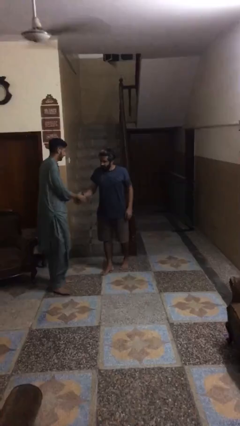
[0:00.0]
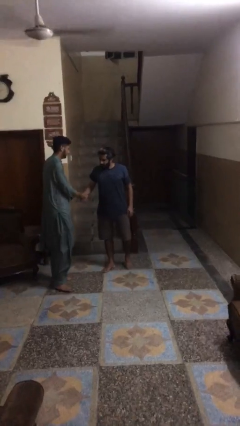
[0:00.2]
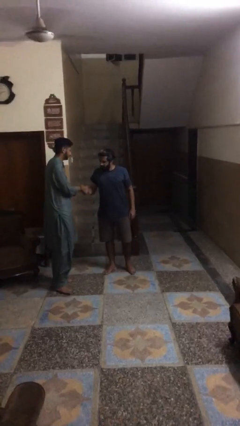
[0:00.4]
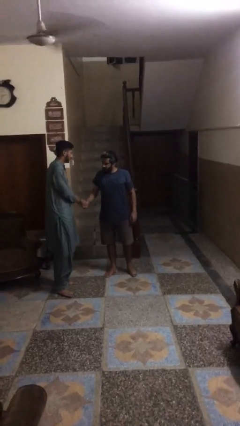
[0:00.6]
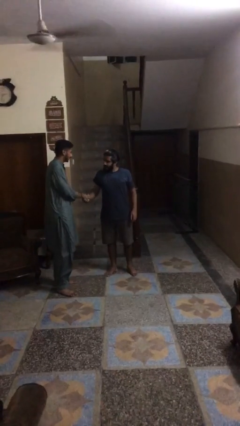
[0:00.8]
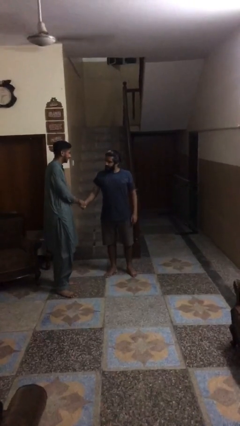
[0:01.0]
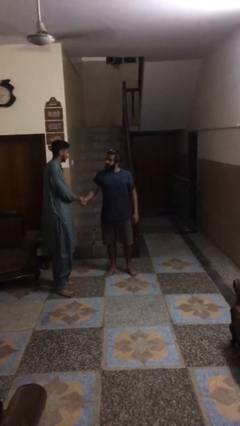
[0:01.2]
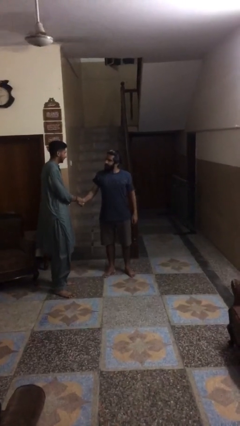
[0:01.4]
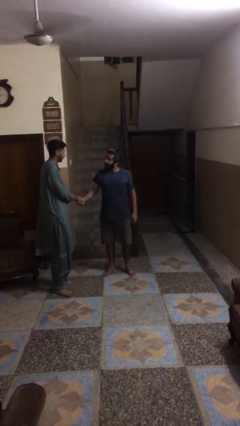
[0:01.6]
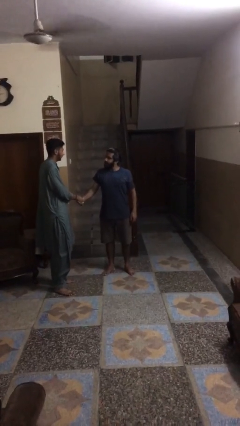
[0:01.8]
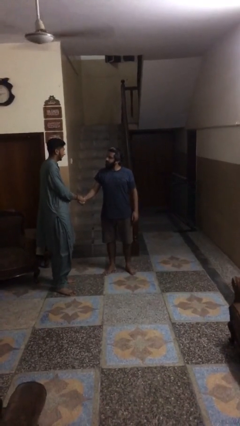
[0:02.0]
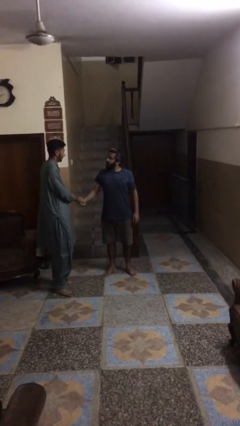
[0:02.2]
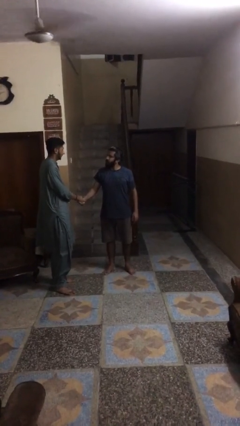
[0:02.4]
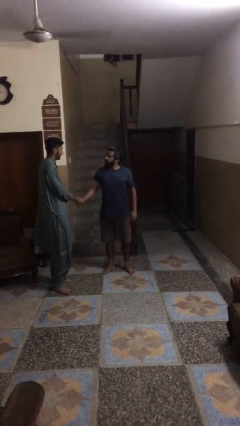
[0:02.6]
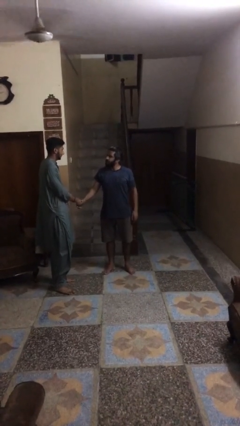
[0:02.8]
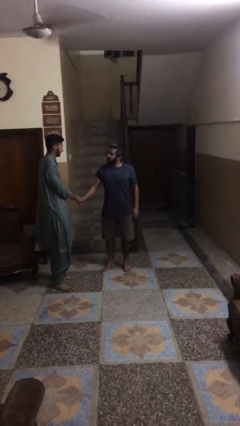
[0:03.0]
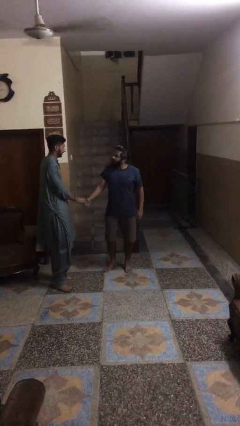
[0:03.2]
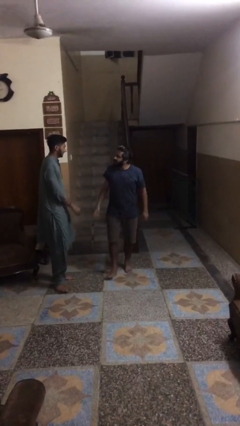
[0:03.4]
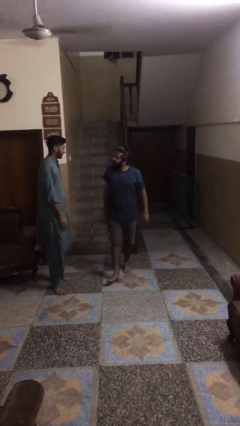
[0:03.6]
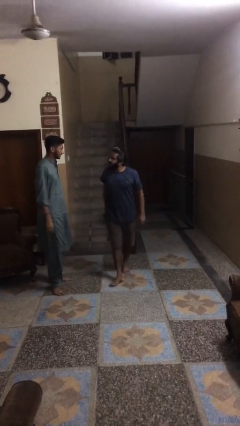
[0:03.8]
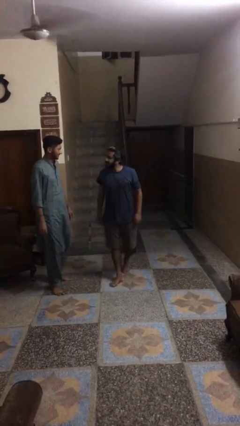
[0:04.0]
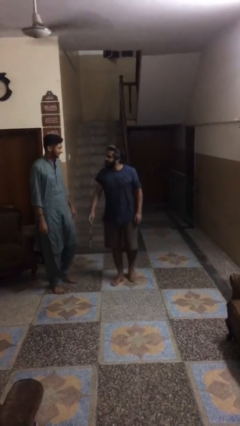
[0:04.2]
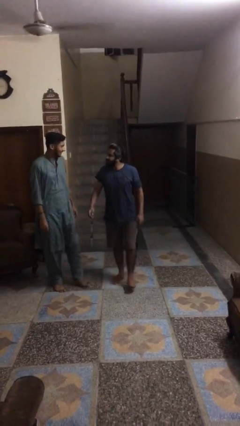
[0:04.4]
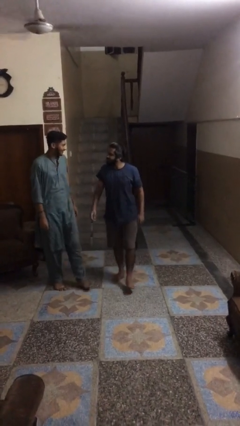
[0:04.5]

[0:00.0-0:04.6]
person shakes hand

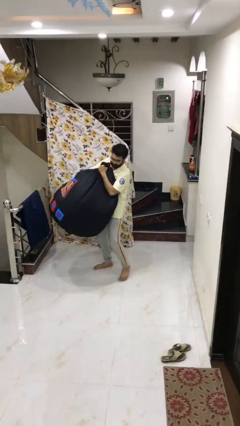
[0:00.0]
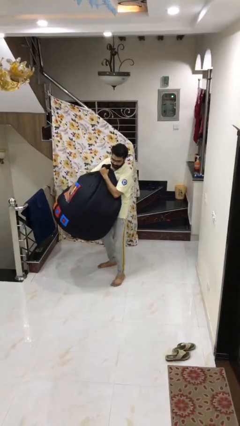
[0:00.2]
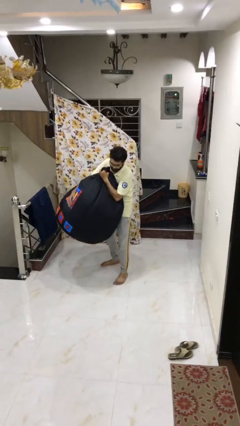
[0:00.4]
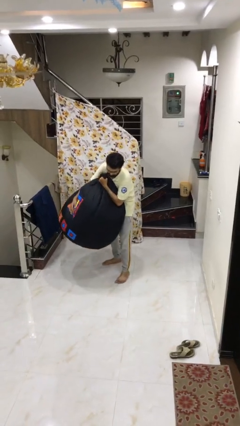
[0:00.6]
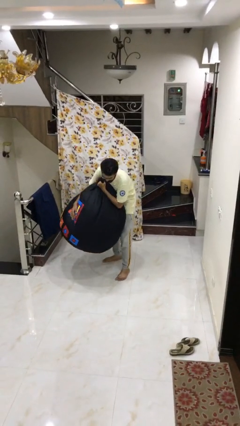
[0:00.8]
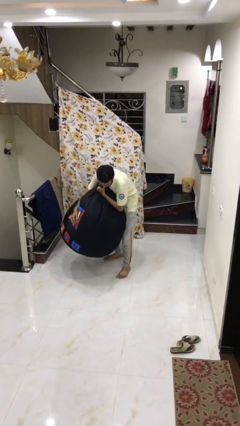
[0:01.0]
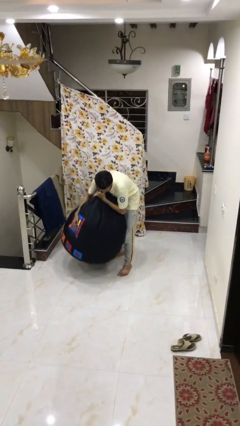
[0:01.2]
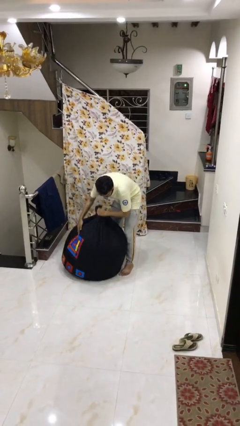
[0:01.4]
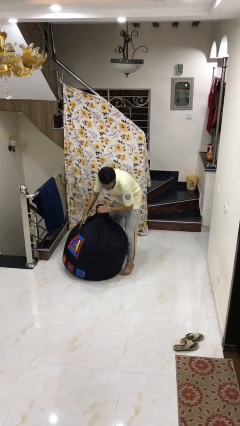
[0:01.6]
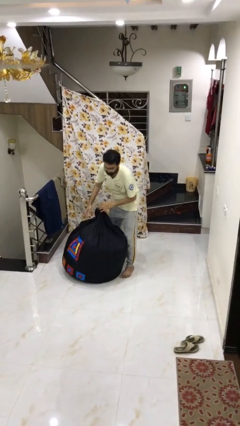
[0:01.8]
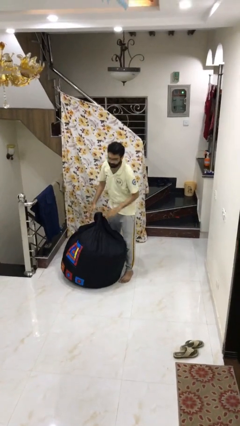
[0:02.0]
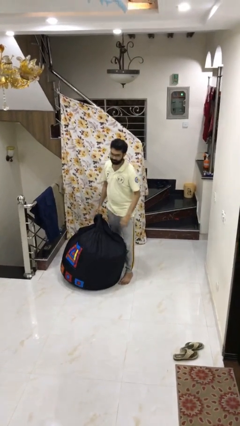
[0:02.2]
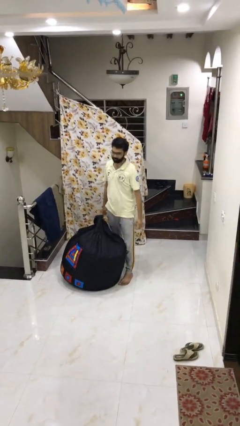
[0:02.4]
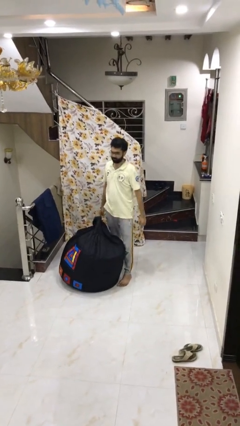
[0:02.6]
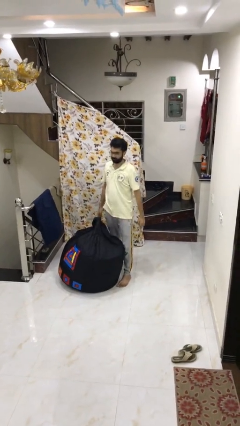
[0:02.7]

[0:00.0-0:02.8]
person puts down object on floor

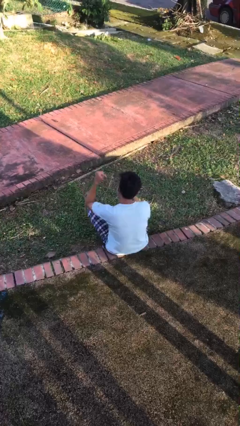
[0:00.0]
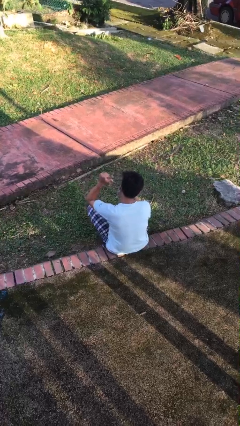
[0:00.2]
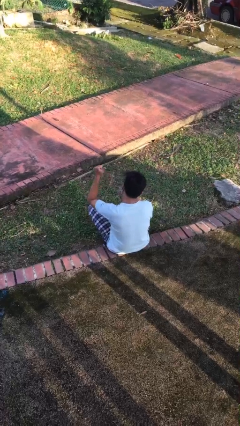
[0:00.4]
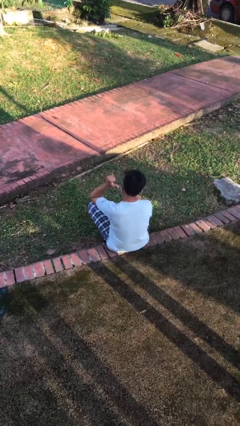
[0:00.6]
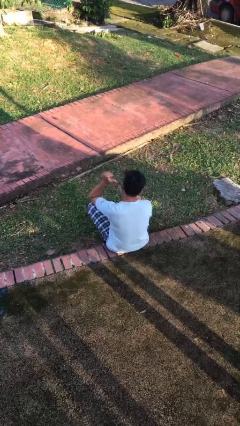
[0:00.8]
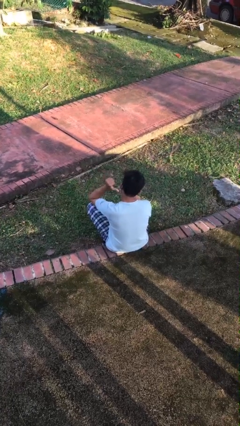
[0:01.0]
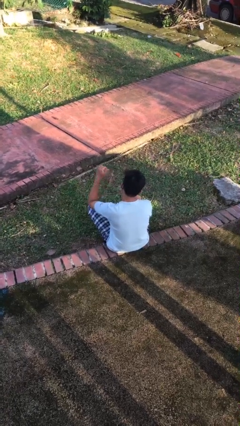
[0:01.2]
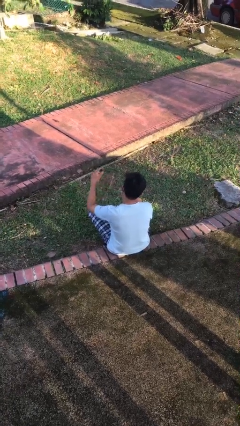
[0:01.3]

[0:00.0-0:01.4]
person gestures behind me

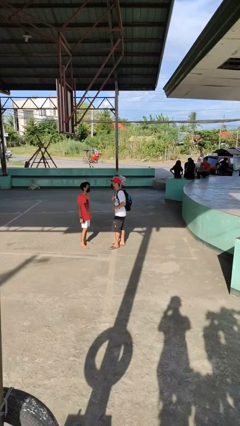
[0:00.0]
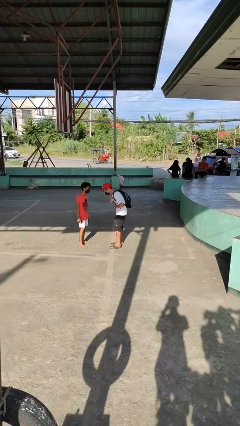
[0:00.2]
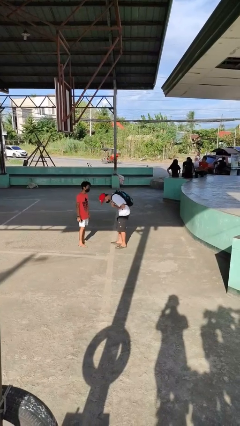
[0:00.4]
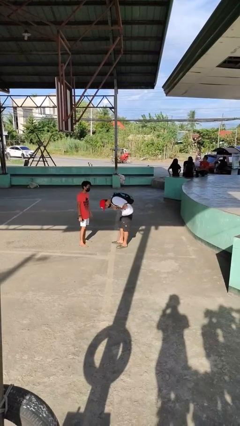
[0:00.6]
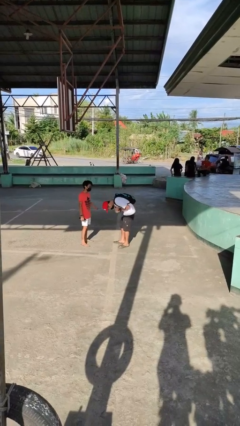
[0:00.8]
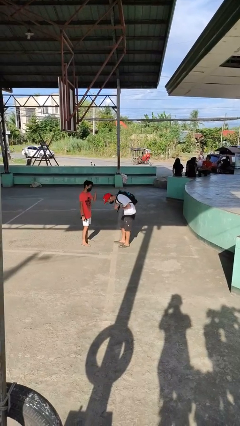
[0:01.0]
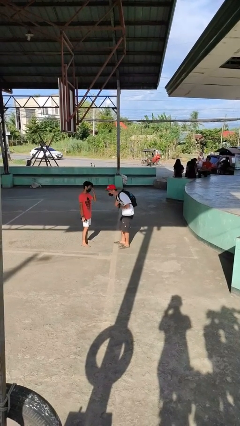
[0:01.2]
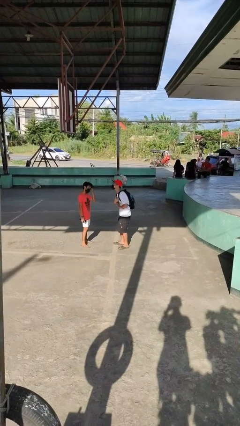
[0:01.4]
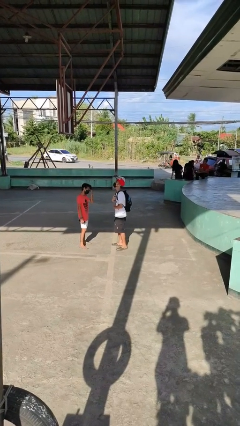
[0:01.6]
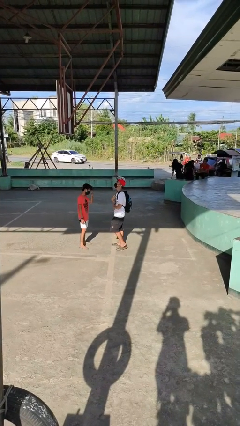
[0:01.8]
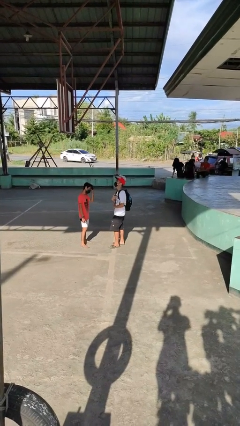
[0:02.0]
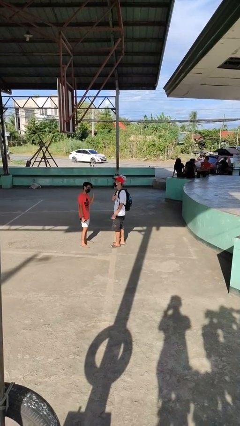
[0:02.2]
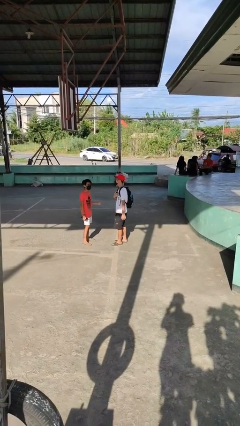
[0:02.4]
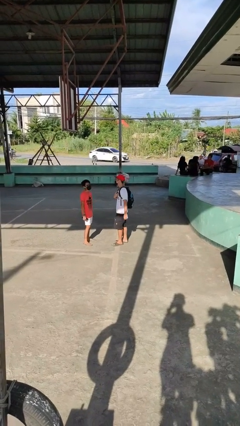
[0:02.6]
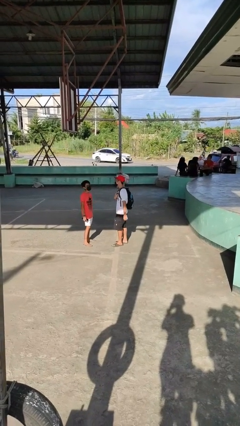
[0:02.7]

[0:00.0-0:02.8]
person laughs with person

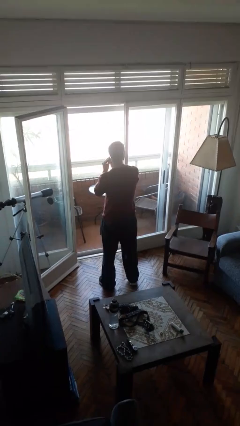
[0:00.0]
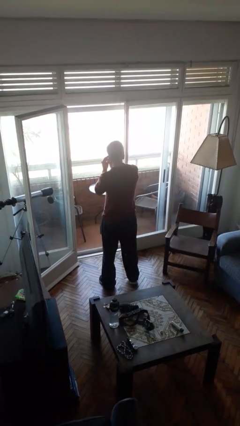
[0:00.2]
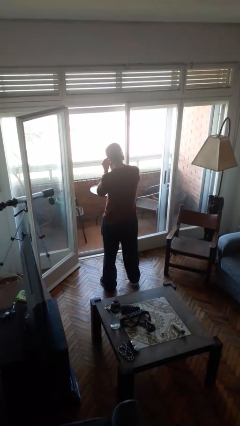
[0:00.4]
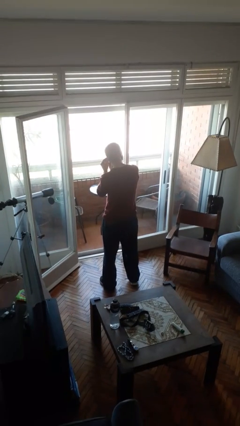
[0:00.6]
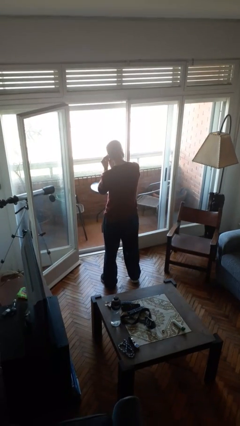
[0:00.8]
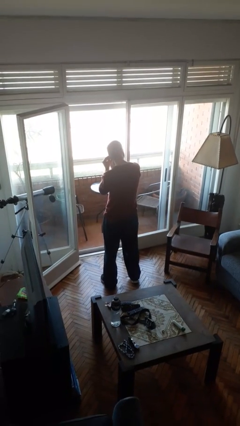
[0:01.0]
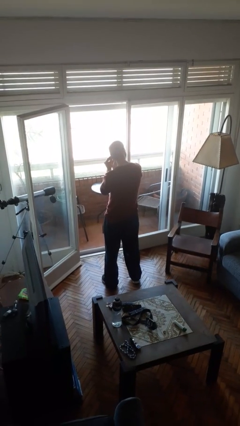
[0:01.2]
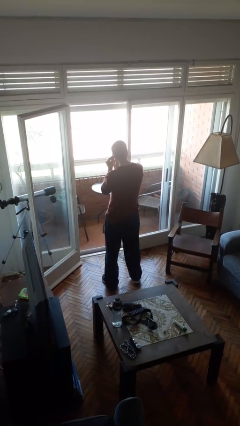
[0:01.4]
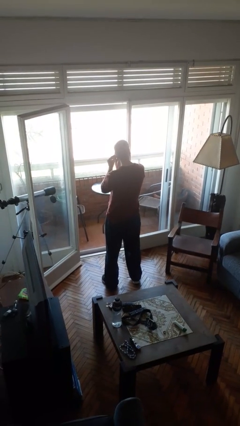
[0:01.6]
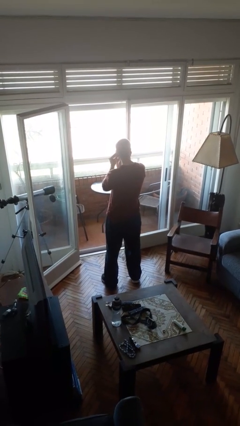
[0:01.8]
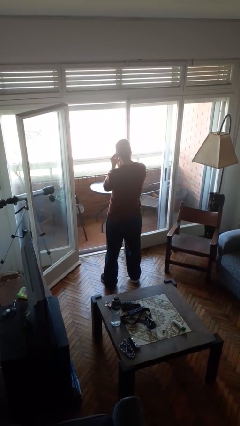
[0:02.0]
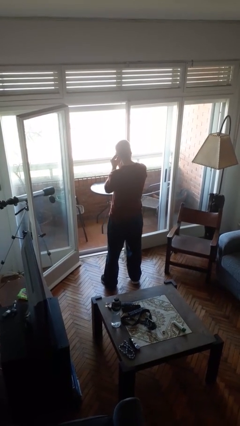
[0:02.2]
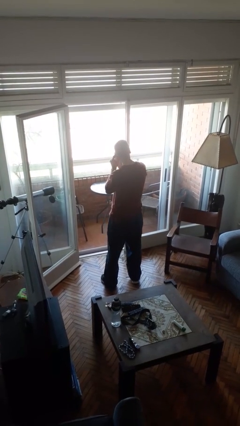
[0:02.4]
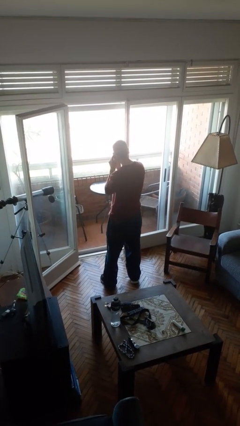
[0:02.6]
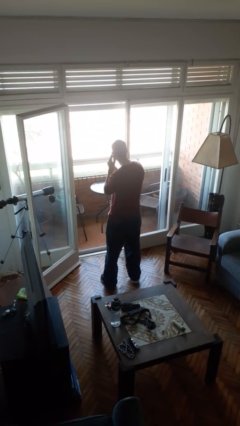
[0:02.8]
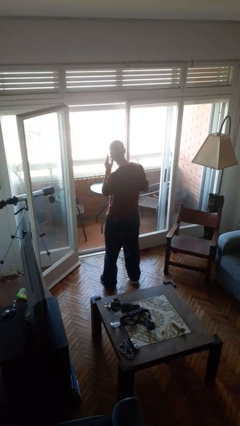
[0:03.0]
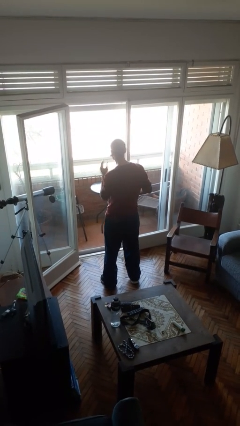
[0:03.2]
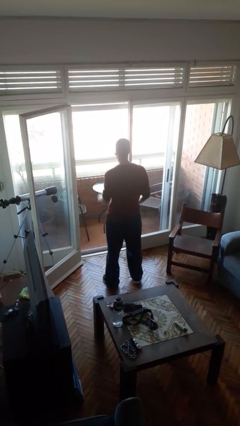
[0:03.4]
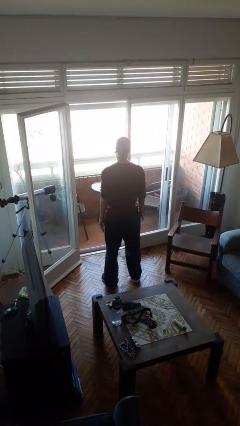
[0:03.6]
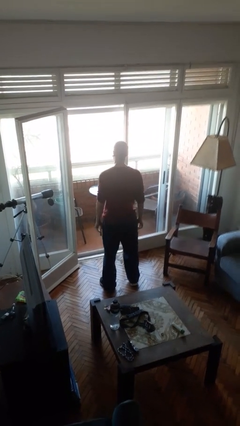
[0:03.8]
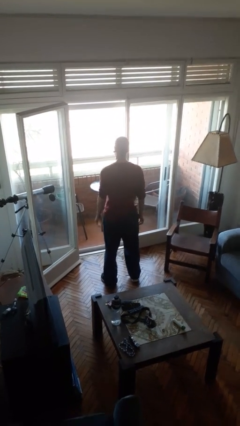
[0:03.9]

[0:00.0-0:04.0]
person puts on earrings

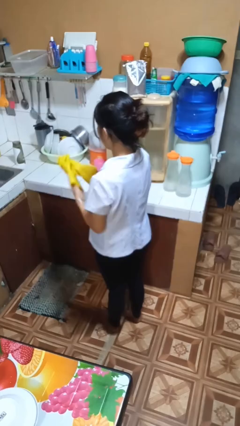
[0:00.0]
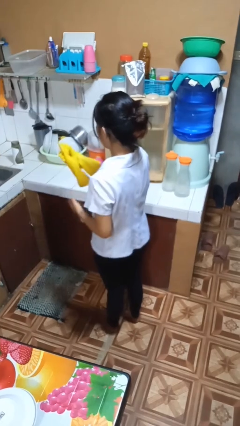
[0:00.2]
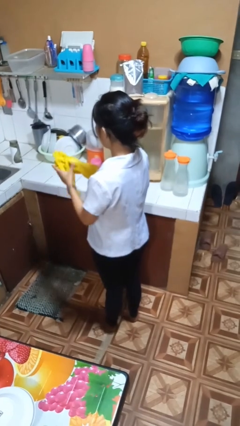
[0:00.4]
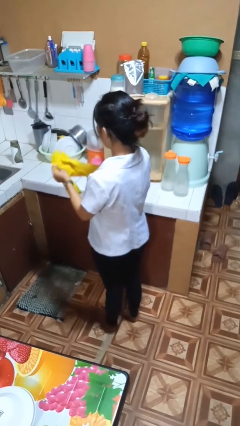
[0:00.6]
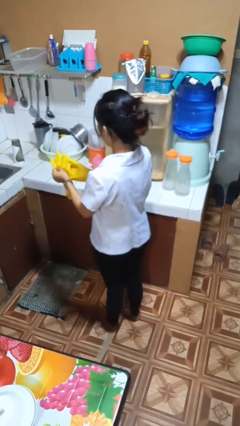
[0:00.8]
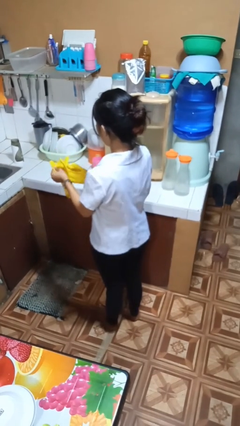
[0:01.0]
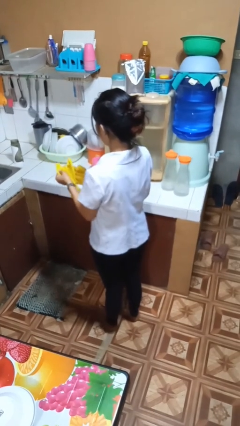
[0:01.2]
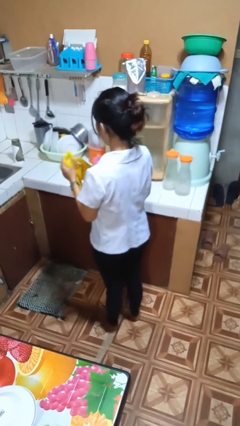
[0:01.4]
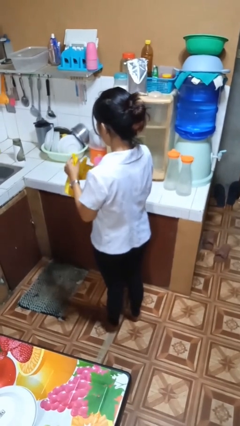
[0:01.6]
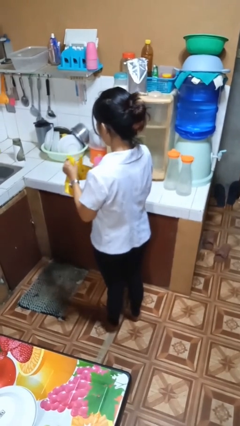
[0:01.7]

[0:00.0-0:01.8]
person takes off gloves
